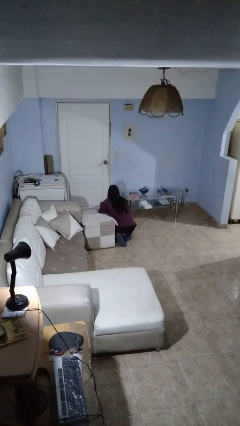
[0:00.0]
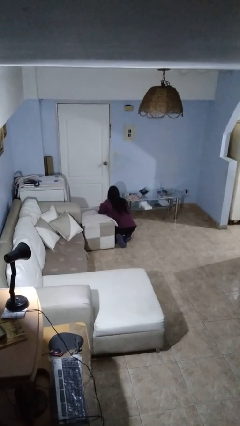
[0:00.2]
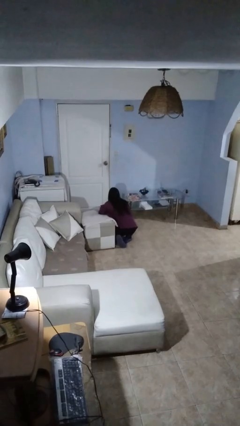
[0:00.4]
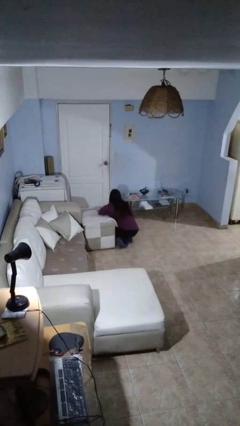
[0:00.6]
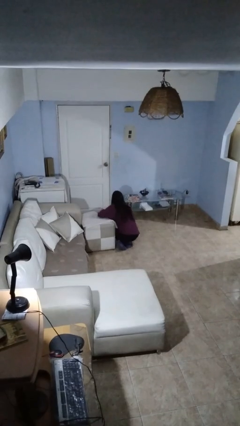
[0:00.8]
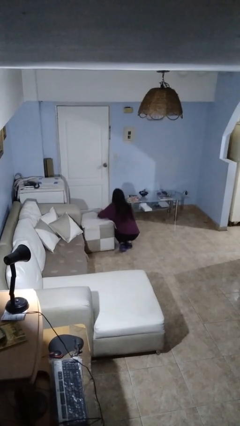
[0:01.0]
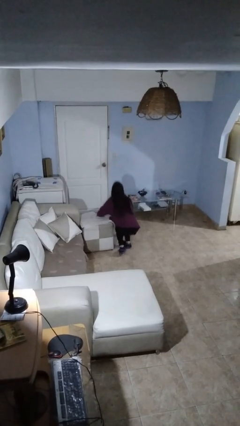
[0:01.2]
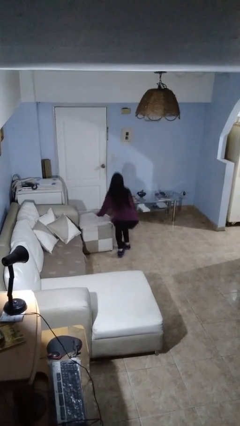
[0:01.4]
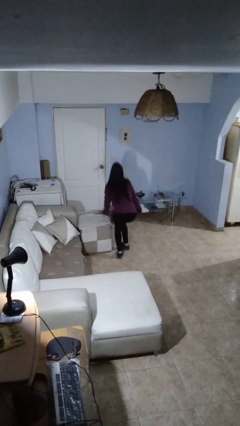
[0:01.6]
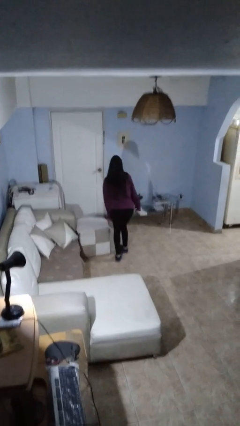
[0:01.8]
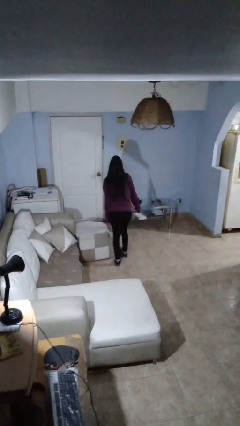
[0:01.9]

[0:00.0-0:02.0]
person stands up from floor

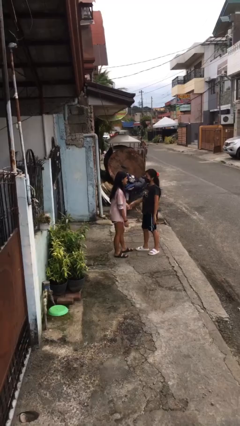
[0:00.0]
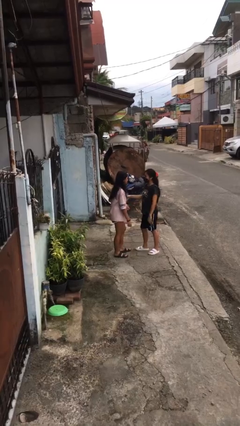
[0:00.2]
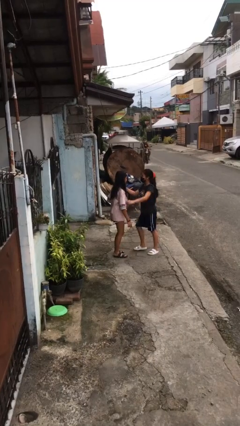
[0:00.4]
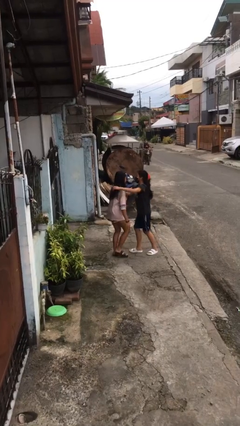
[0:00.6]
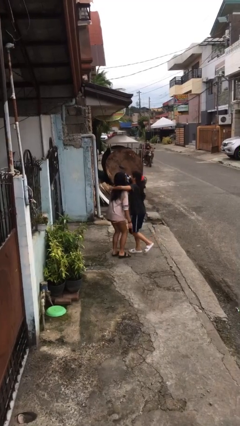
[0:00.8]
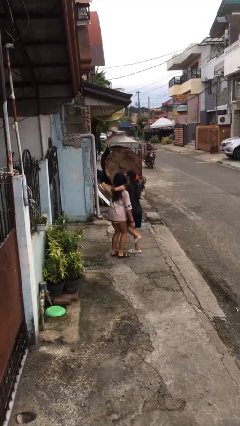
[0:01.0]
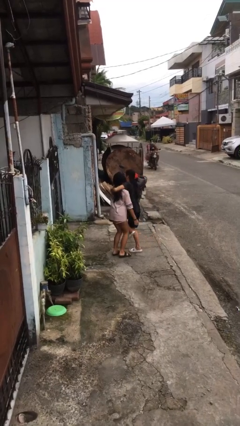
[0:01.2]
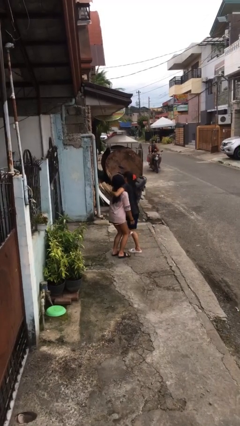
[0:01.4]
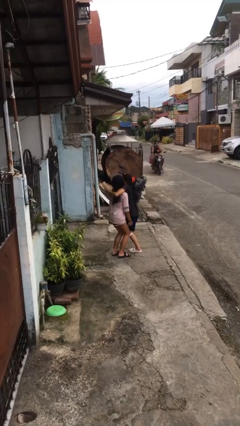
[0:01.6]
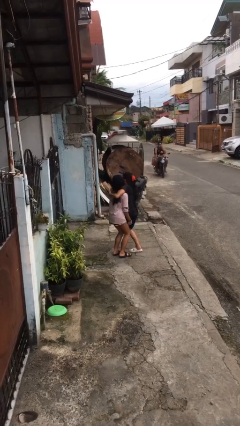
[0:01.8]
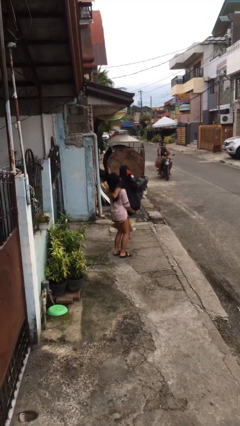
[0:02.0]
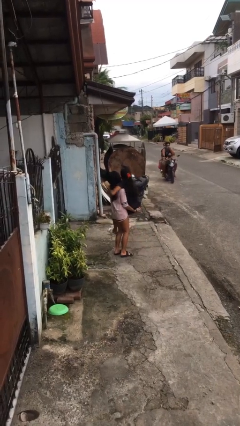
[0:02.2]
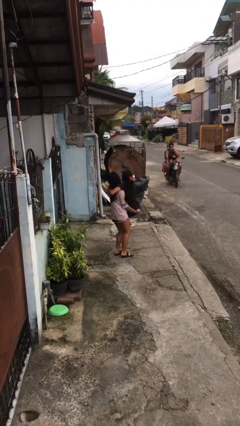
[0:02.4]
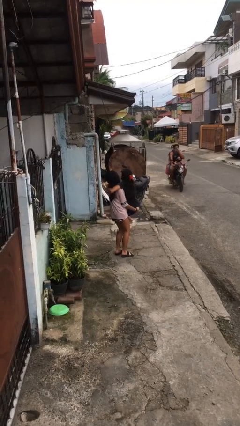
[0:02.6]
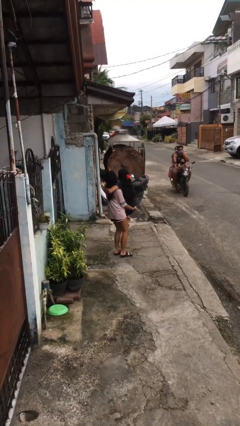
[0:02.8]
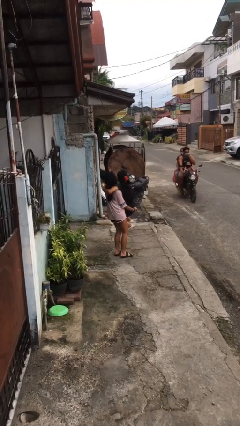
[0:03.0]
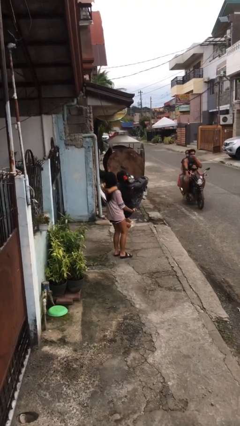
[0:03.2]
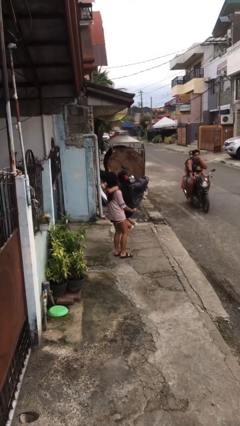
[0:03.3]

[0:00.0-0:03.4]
person picks up person

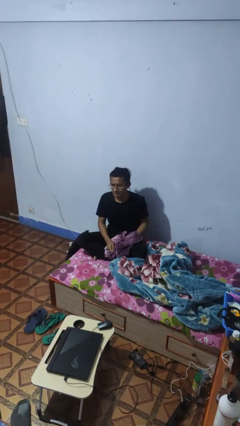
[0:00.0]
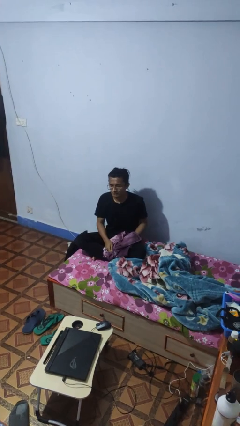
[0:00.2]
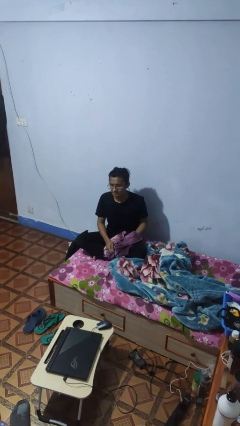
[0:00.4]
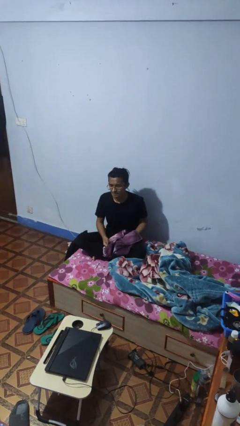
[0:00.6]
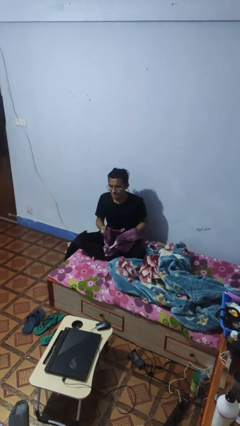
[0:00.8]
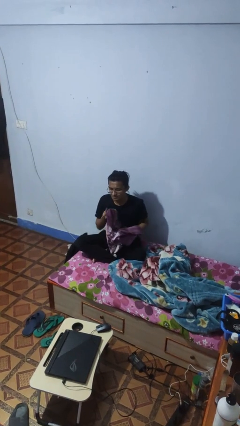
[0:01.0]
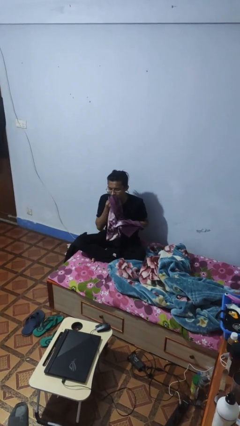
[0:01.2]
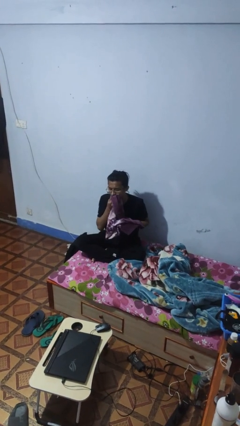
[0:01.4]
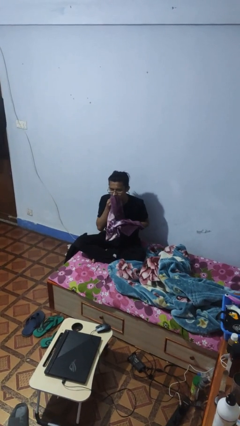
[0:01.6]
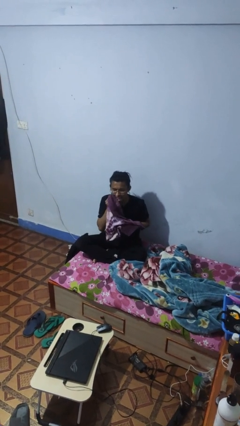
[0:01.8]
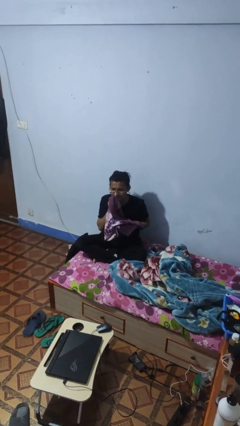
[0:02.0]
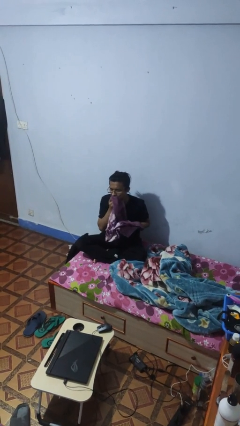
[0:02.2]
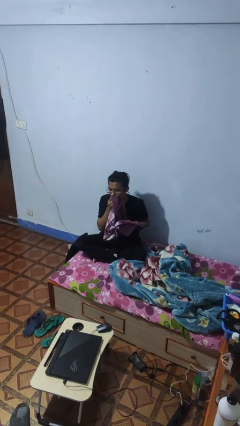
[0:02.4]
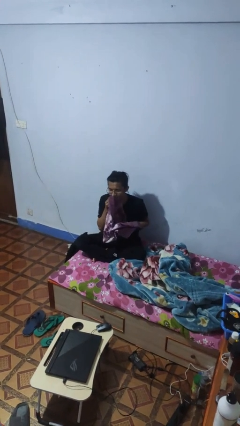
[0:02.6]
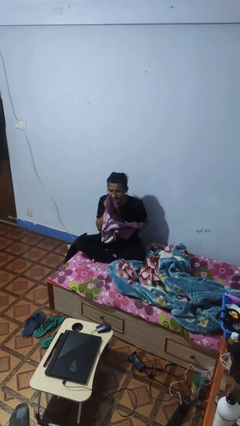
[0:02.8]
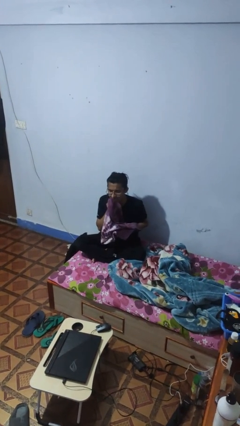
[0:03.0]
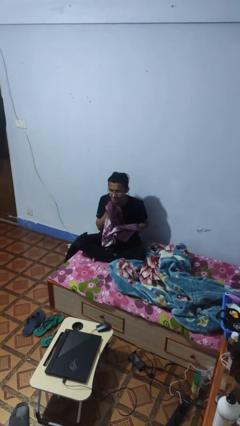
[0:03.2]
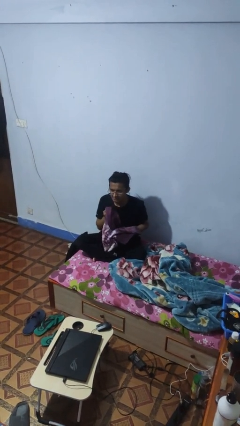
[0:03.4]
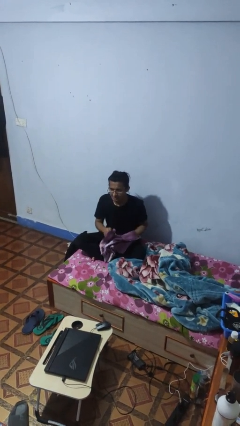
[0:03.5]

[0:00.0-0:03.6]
person wipes mouth with napkin

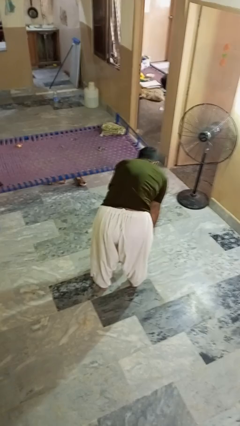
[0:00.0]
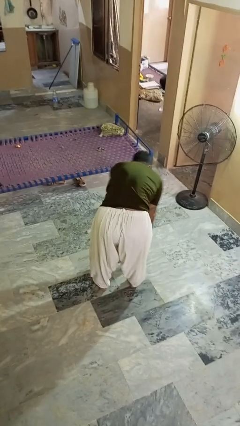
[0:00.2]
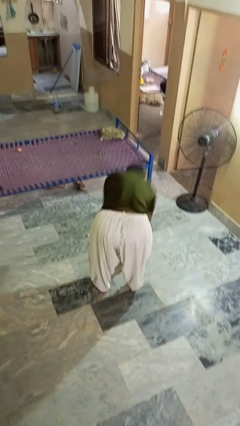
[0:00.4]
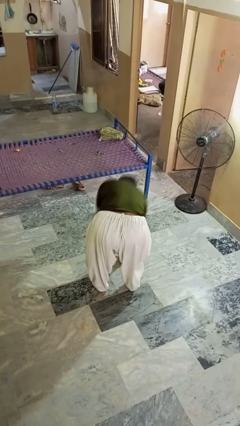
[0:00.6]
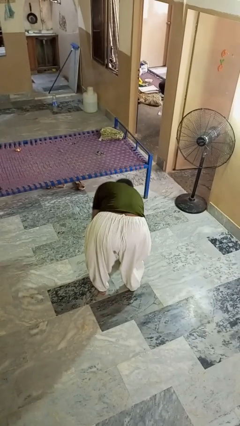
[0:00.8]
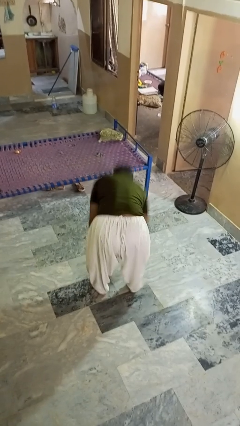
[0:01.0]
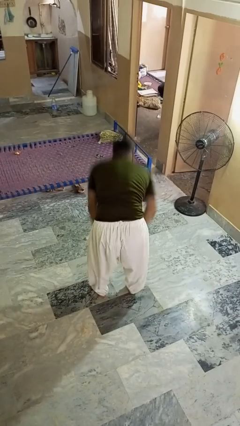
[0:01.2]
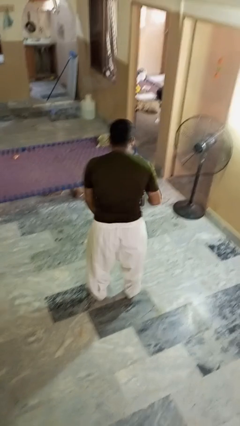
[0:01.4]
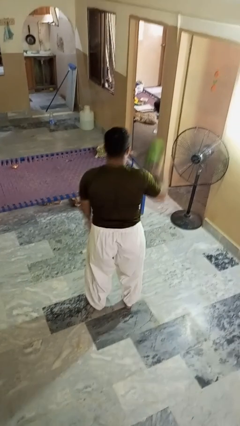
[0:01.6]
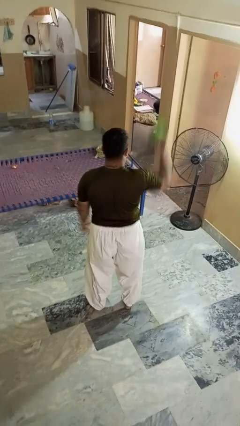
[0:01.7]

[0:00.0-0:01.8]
person picks up object from floor

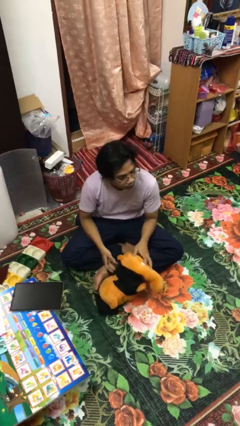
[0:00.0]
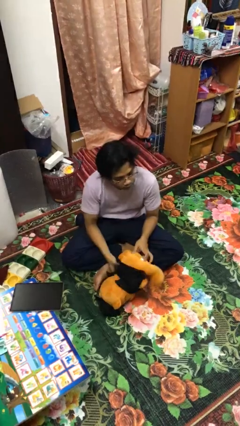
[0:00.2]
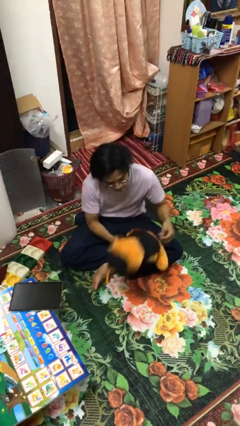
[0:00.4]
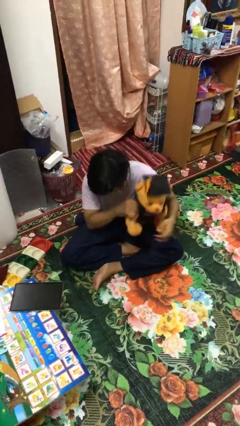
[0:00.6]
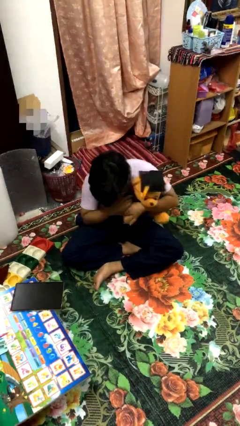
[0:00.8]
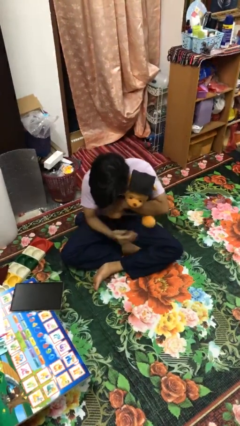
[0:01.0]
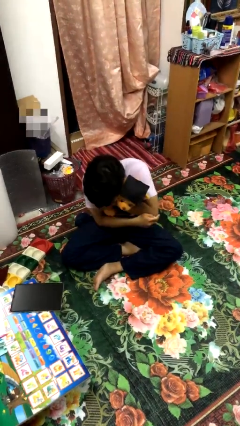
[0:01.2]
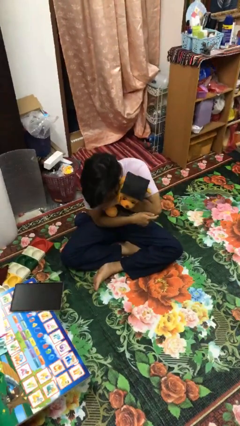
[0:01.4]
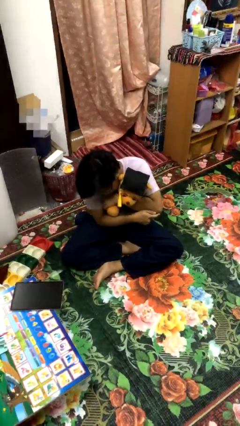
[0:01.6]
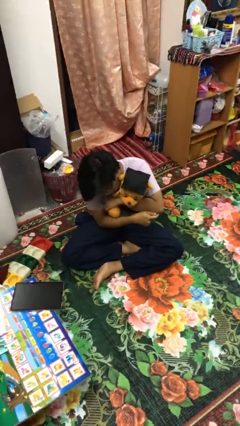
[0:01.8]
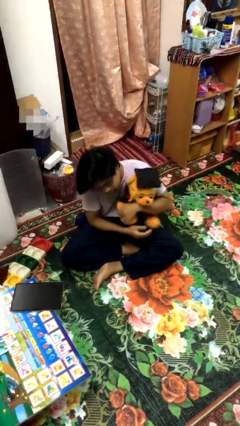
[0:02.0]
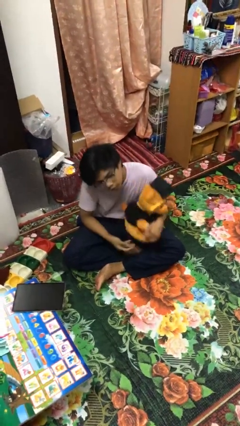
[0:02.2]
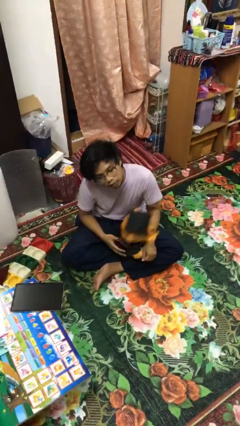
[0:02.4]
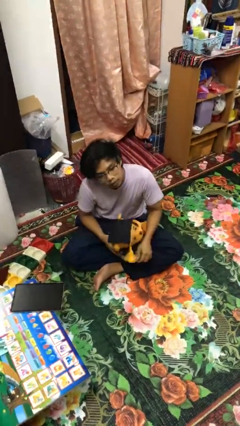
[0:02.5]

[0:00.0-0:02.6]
person hugs stuffed animal

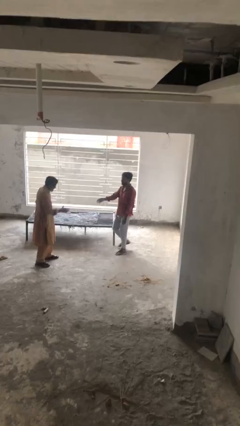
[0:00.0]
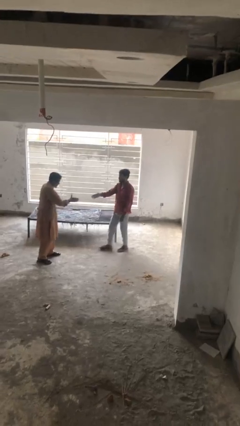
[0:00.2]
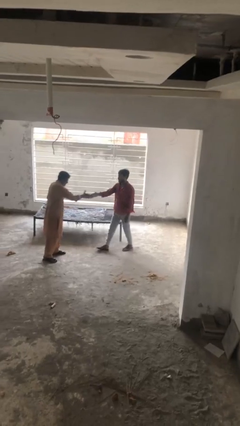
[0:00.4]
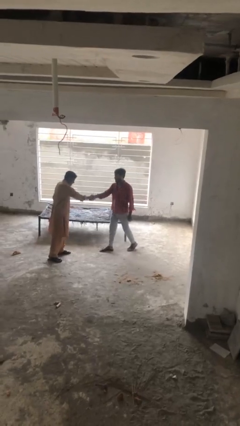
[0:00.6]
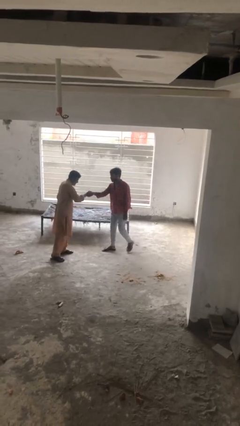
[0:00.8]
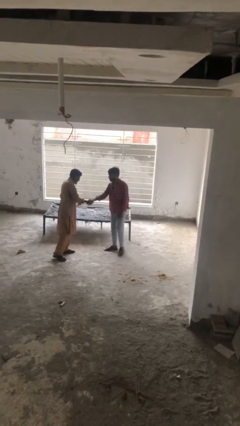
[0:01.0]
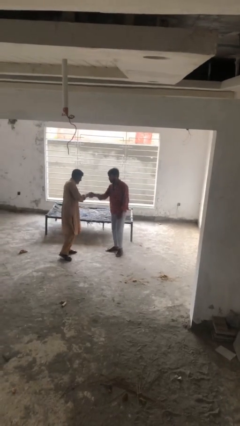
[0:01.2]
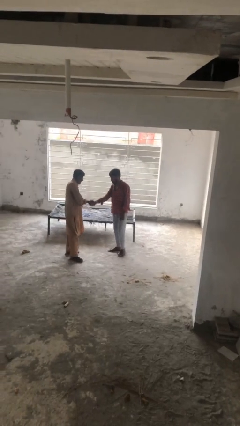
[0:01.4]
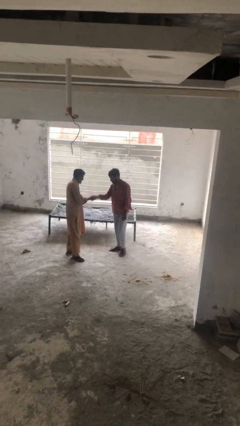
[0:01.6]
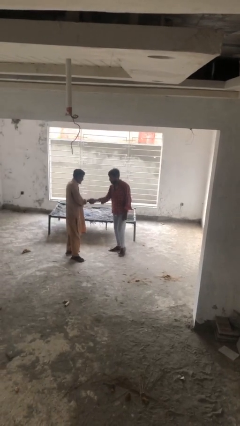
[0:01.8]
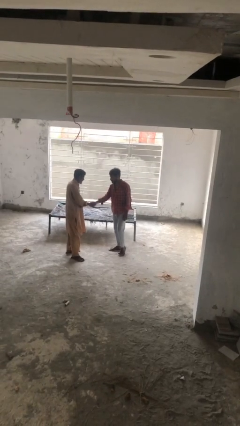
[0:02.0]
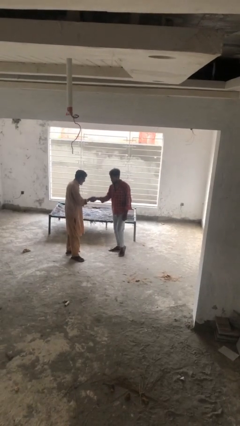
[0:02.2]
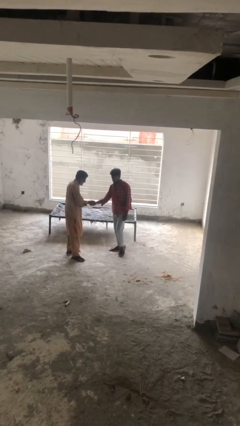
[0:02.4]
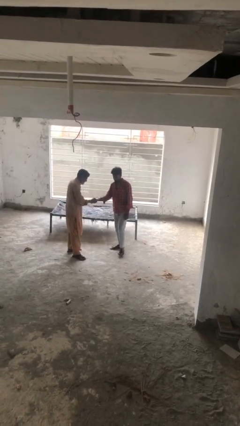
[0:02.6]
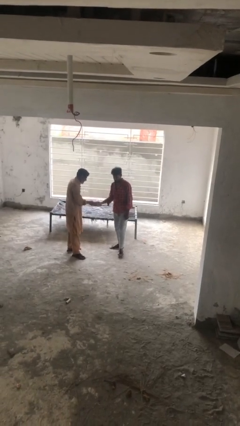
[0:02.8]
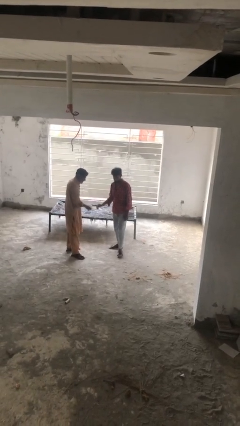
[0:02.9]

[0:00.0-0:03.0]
person shakes hand

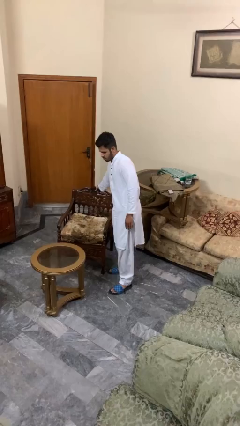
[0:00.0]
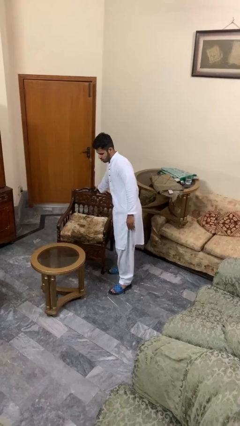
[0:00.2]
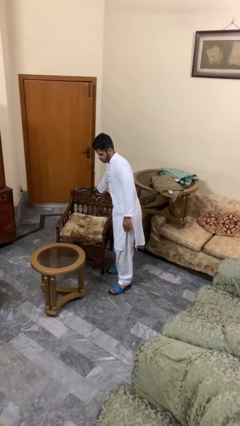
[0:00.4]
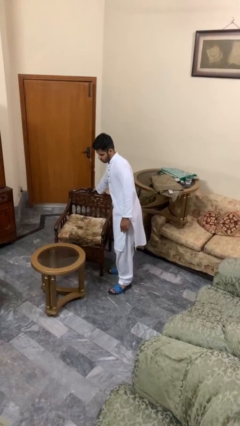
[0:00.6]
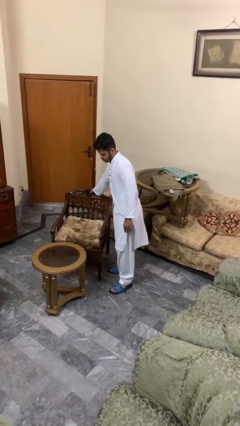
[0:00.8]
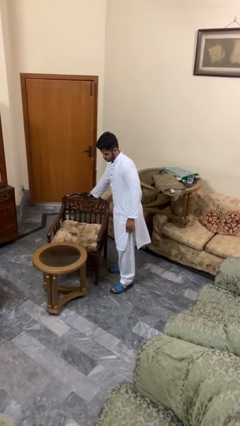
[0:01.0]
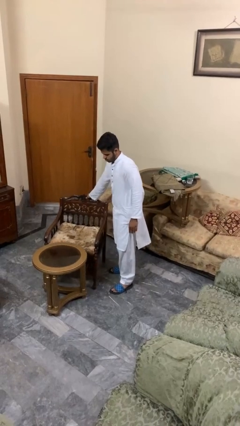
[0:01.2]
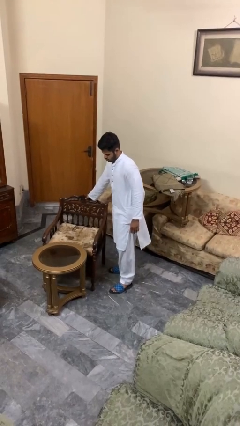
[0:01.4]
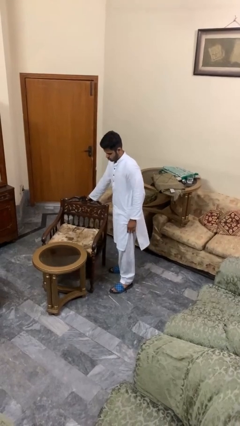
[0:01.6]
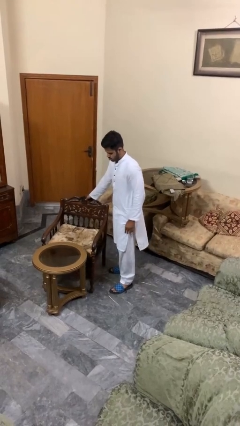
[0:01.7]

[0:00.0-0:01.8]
person pushes in chair
